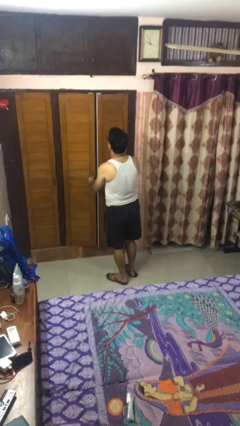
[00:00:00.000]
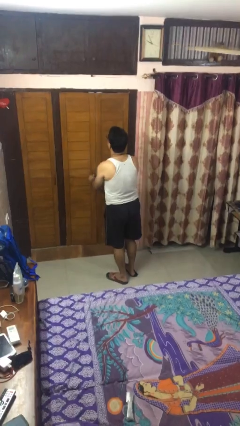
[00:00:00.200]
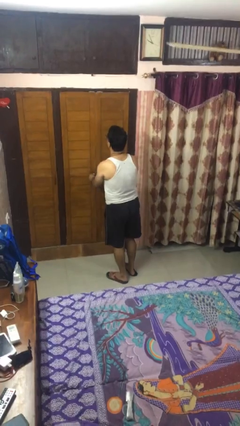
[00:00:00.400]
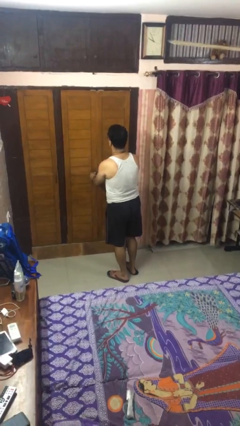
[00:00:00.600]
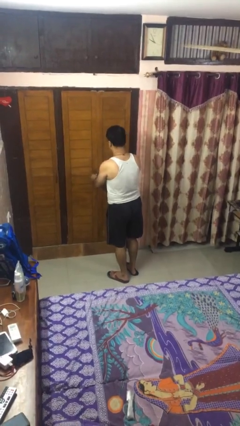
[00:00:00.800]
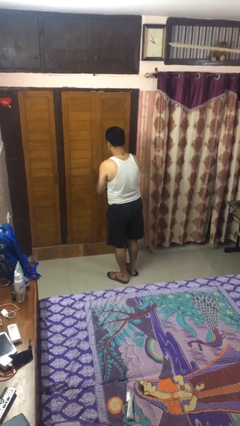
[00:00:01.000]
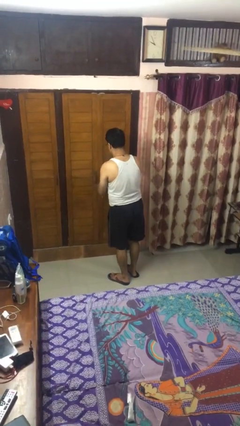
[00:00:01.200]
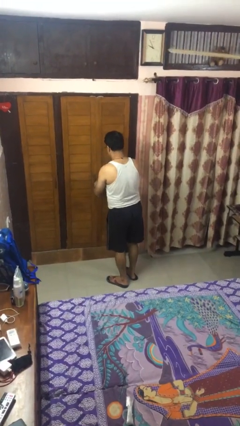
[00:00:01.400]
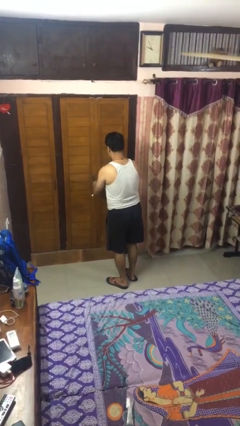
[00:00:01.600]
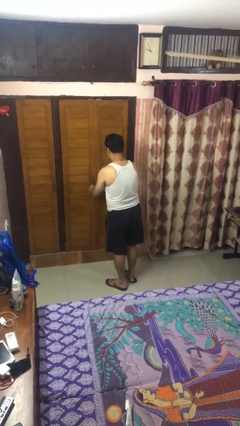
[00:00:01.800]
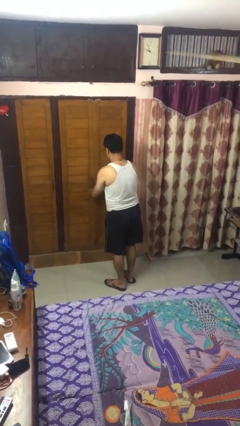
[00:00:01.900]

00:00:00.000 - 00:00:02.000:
person closes facility door

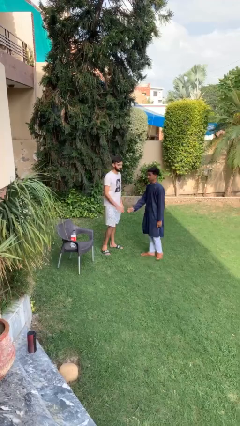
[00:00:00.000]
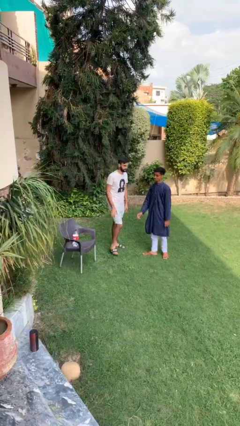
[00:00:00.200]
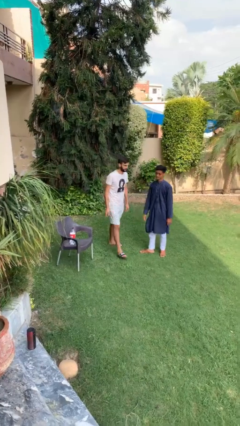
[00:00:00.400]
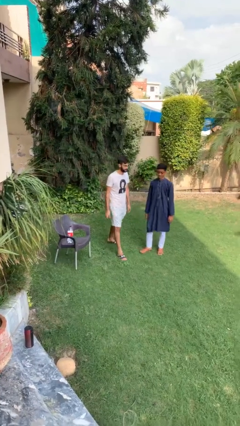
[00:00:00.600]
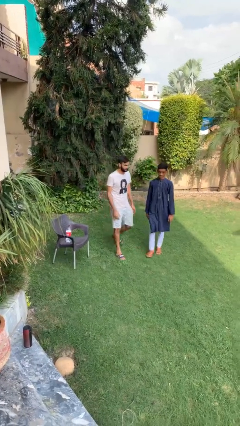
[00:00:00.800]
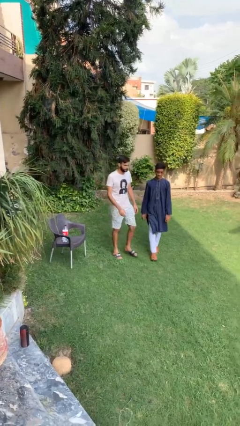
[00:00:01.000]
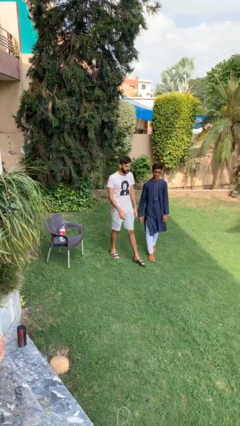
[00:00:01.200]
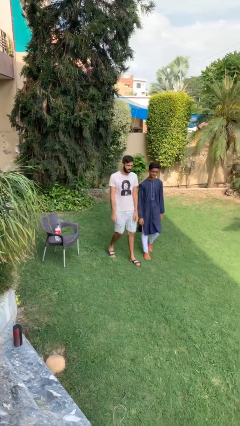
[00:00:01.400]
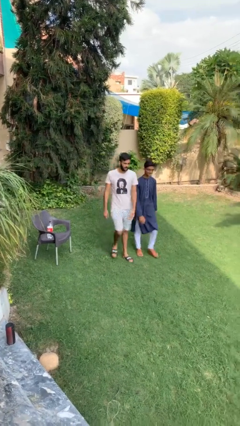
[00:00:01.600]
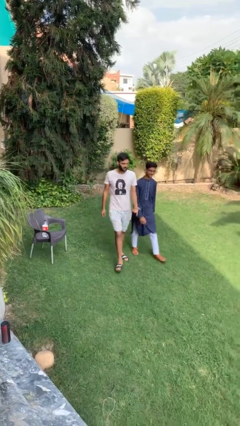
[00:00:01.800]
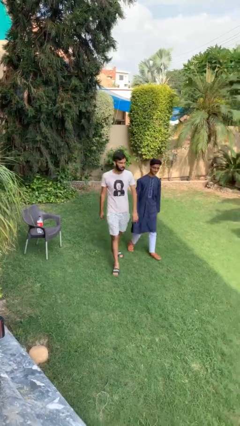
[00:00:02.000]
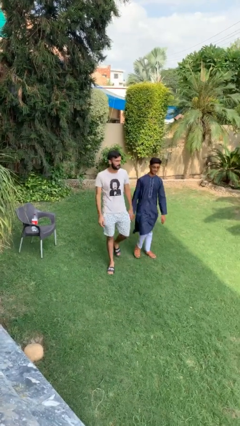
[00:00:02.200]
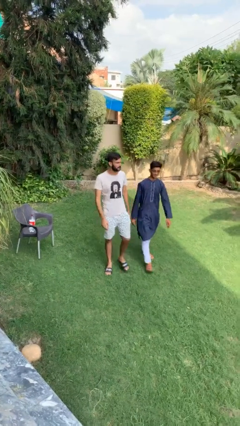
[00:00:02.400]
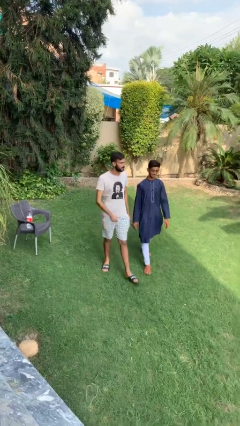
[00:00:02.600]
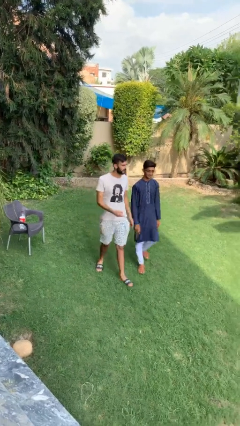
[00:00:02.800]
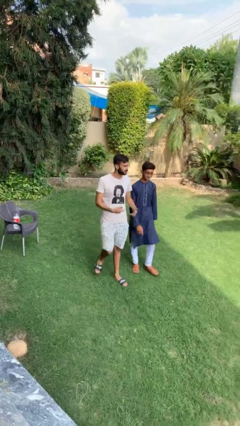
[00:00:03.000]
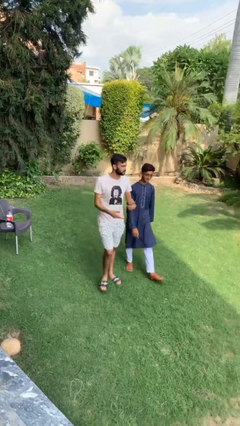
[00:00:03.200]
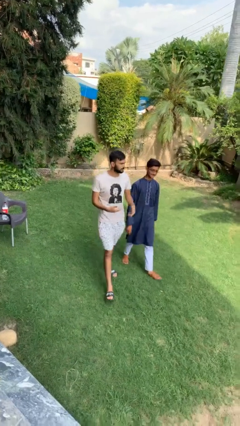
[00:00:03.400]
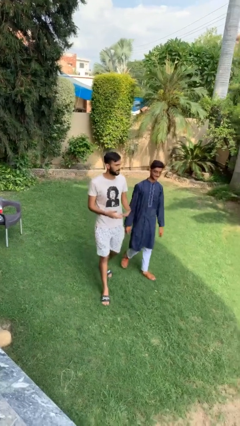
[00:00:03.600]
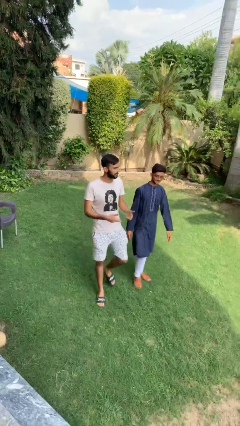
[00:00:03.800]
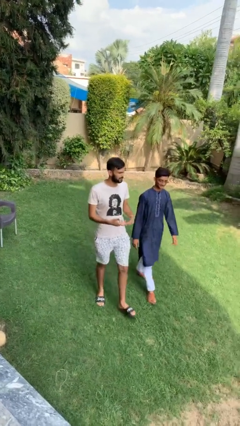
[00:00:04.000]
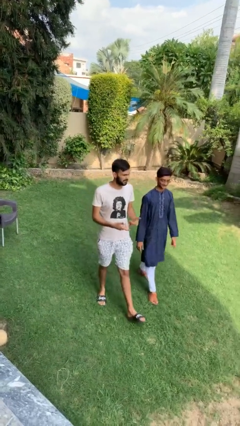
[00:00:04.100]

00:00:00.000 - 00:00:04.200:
person talks to person

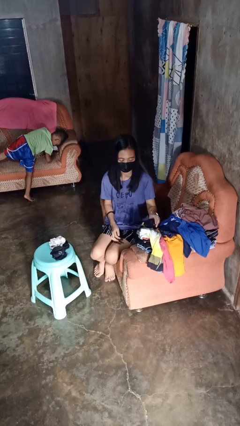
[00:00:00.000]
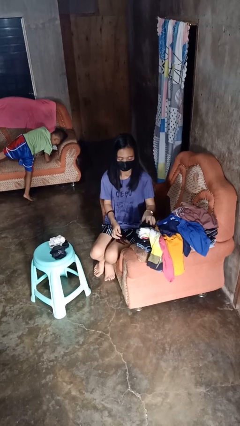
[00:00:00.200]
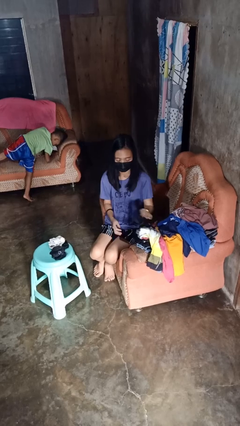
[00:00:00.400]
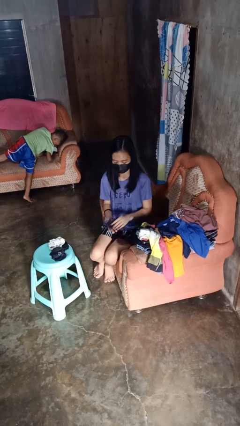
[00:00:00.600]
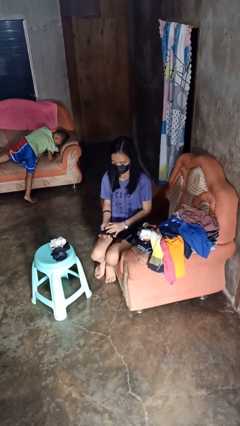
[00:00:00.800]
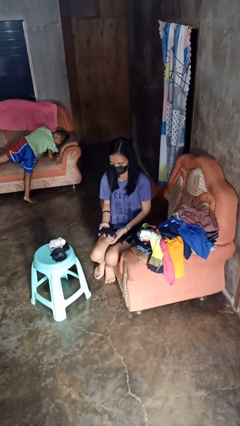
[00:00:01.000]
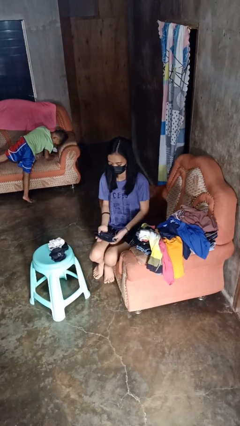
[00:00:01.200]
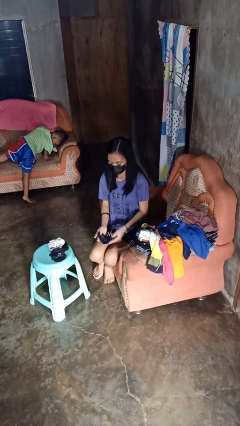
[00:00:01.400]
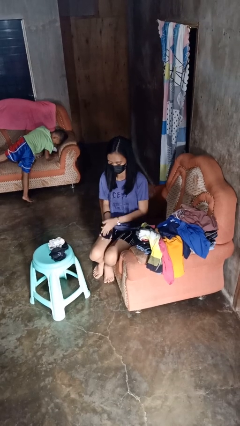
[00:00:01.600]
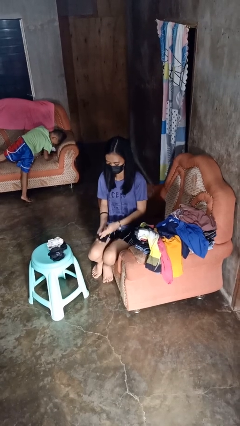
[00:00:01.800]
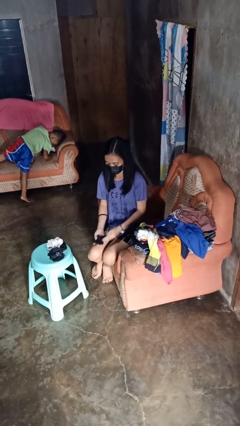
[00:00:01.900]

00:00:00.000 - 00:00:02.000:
person folds socks

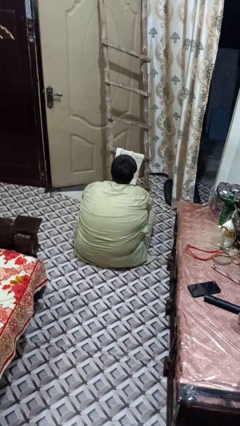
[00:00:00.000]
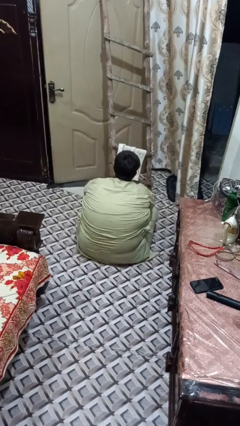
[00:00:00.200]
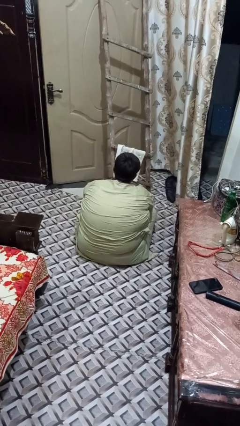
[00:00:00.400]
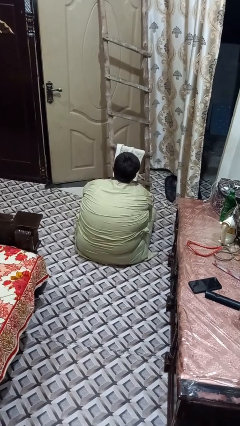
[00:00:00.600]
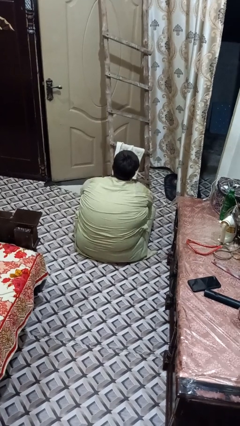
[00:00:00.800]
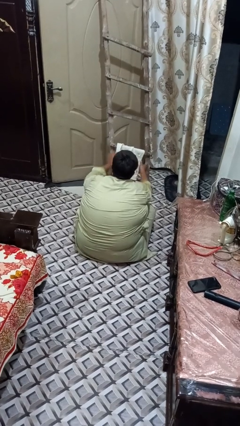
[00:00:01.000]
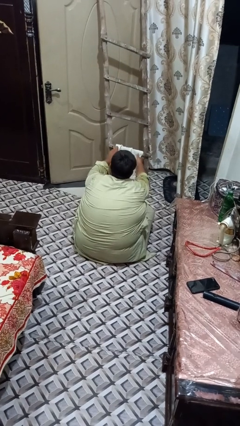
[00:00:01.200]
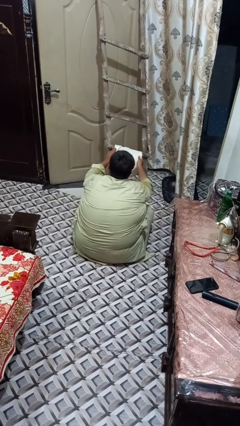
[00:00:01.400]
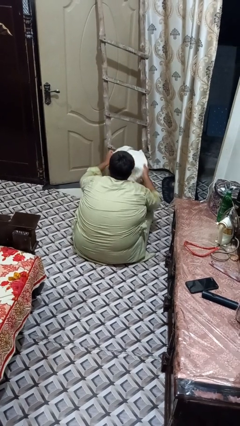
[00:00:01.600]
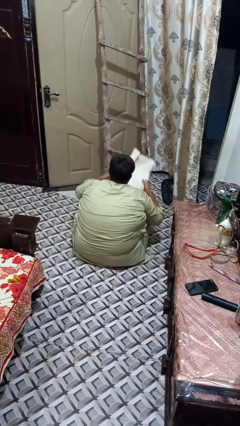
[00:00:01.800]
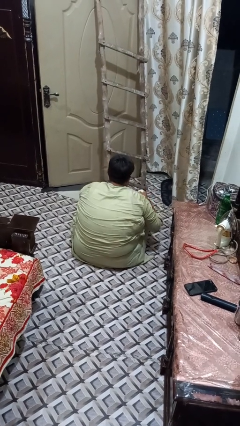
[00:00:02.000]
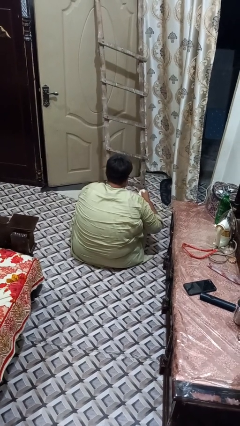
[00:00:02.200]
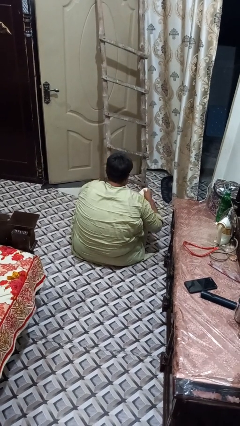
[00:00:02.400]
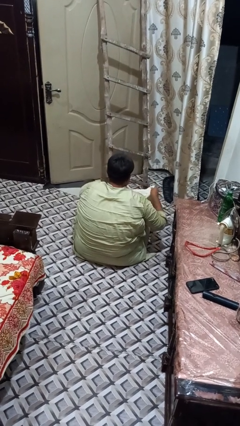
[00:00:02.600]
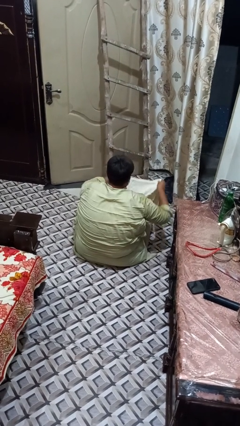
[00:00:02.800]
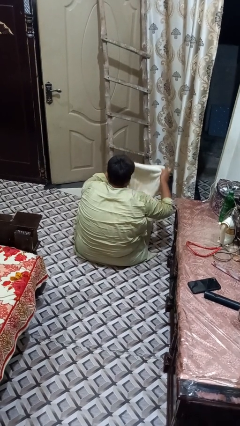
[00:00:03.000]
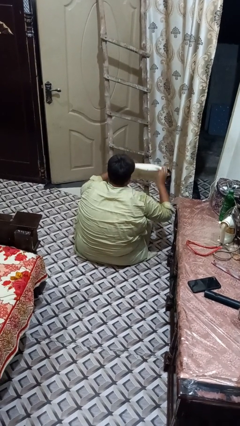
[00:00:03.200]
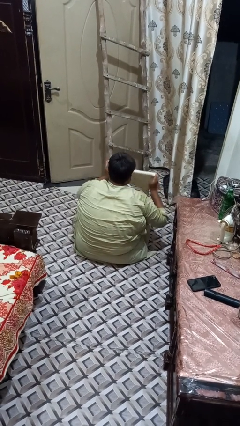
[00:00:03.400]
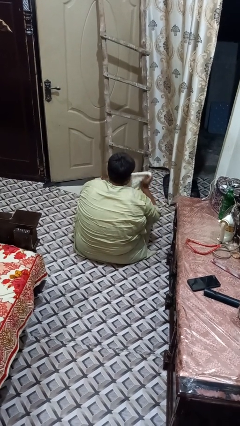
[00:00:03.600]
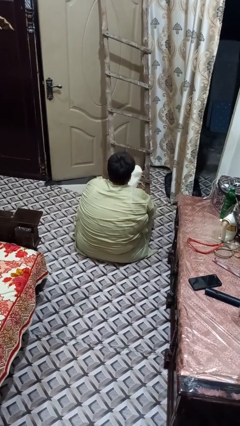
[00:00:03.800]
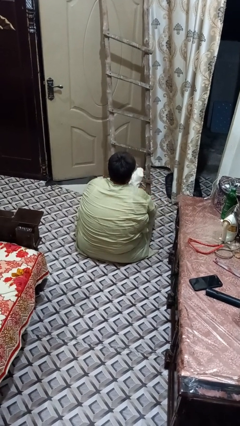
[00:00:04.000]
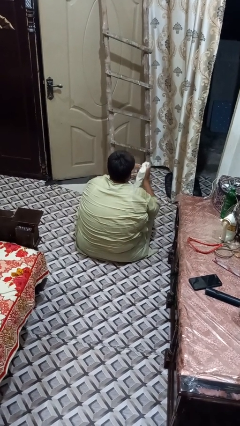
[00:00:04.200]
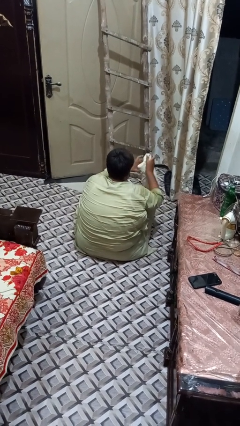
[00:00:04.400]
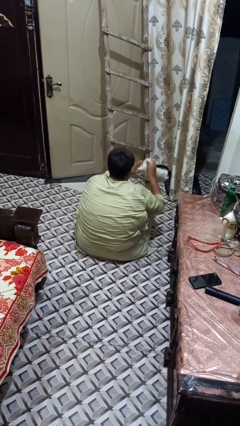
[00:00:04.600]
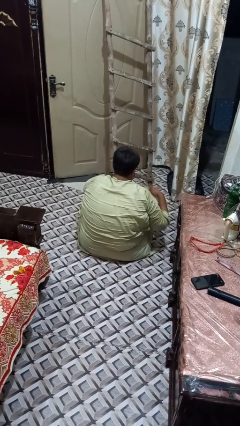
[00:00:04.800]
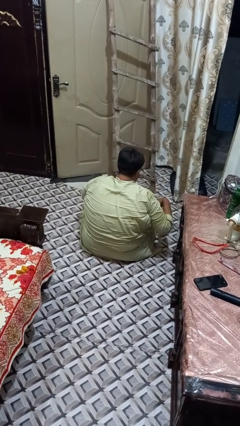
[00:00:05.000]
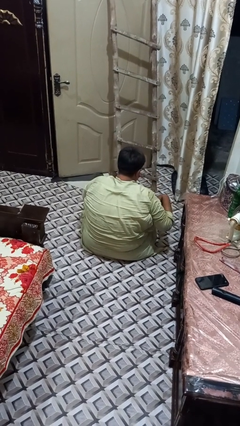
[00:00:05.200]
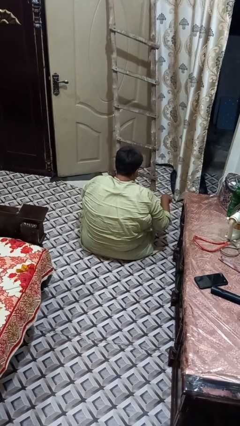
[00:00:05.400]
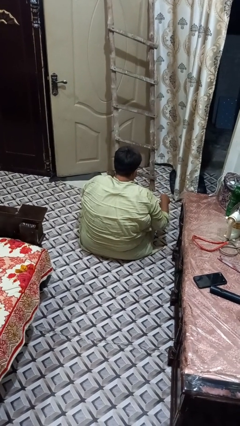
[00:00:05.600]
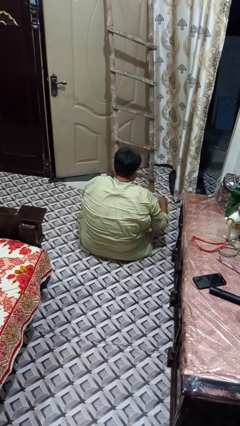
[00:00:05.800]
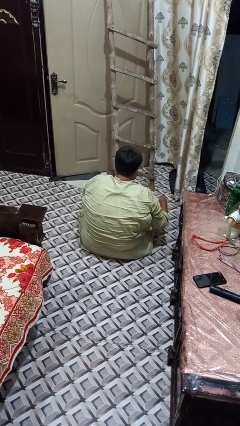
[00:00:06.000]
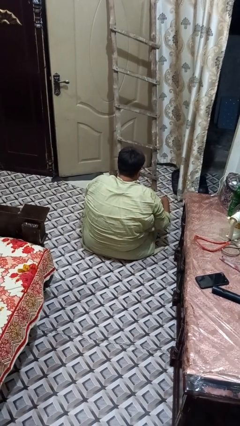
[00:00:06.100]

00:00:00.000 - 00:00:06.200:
person folds towel

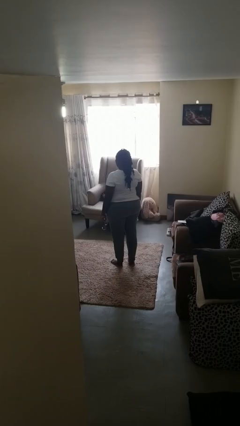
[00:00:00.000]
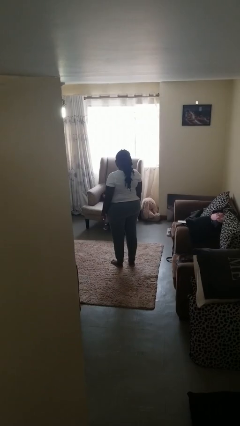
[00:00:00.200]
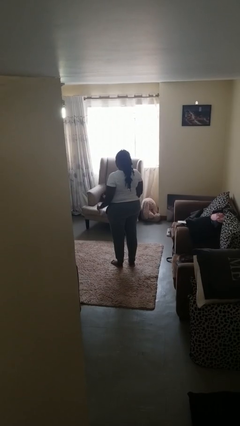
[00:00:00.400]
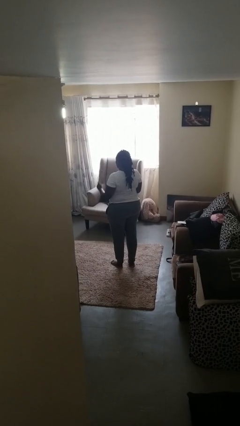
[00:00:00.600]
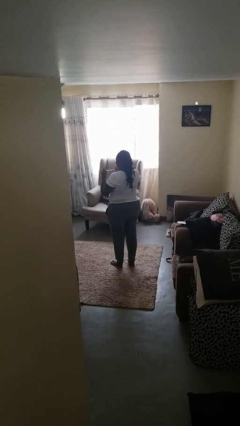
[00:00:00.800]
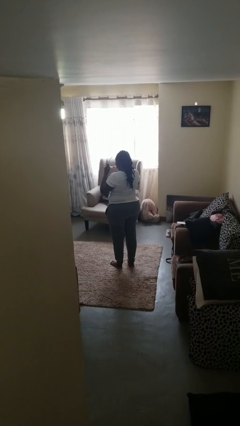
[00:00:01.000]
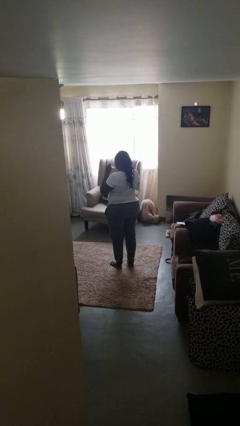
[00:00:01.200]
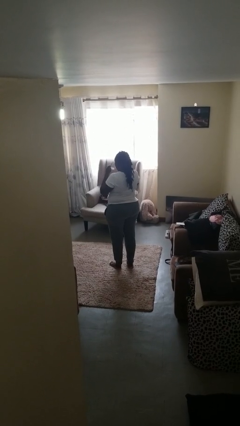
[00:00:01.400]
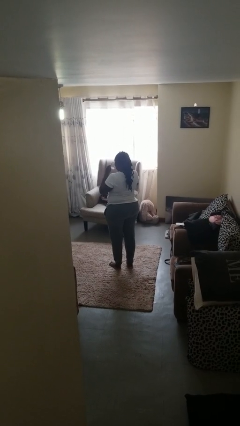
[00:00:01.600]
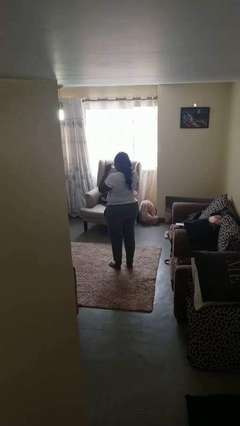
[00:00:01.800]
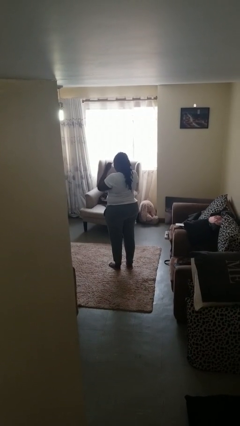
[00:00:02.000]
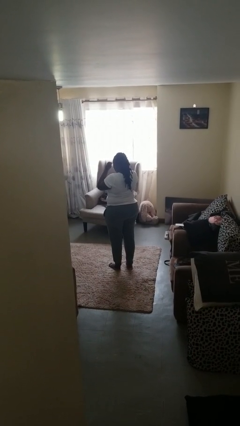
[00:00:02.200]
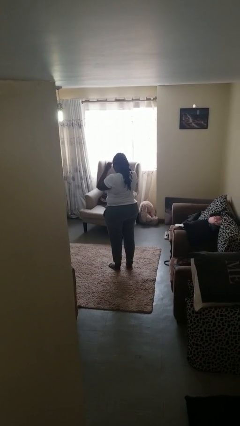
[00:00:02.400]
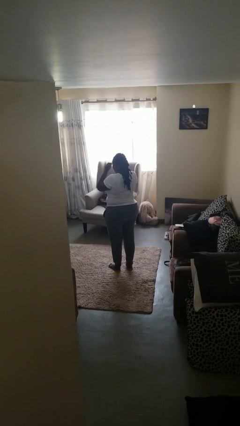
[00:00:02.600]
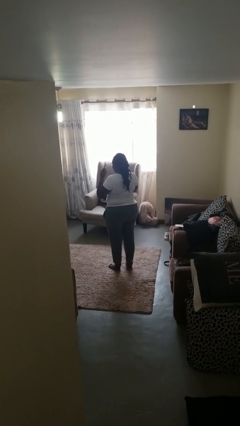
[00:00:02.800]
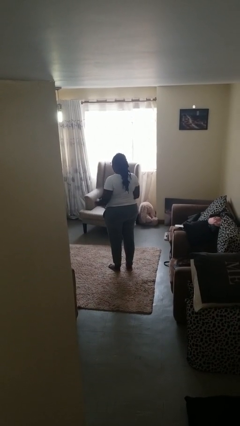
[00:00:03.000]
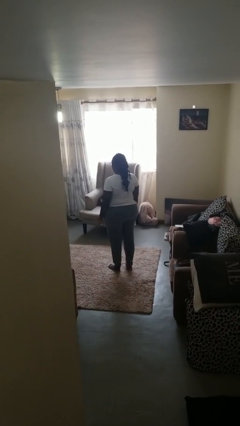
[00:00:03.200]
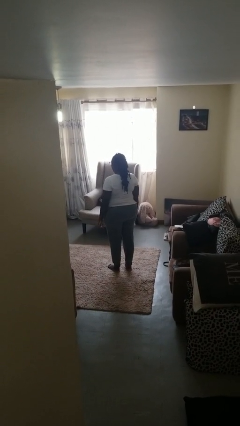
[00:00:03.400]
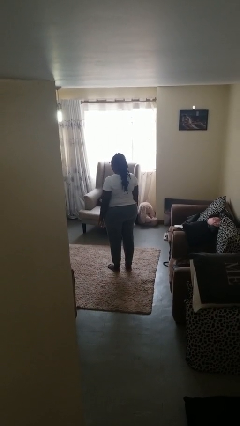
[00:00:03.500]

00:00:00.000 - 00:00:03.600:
person puts on glasses
